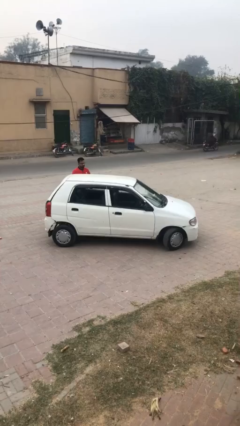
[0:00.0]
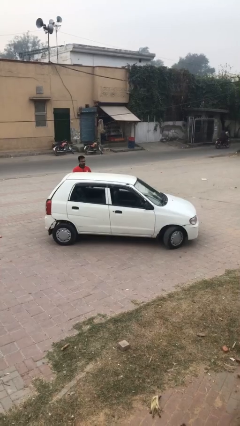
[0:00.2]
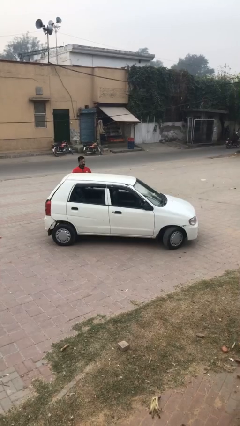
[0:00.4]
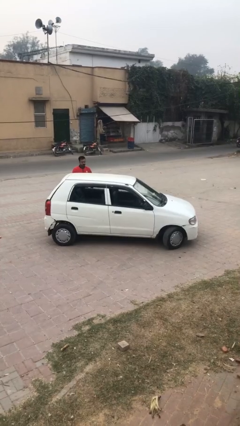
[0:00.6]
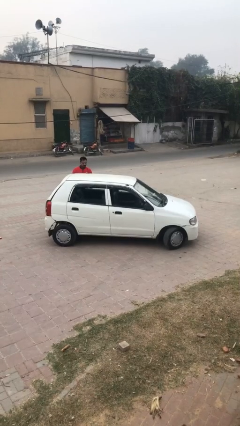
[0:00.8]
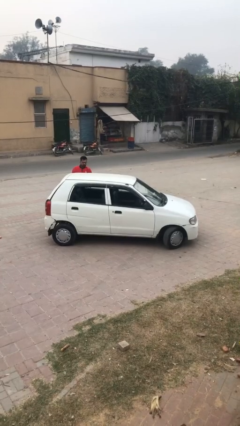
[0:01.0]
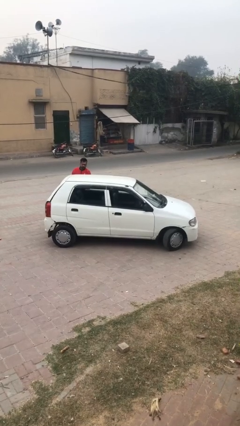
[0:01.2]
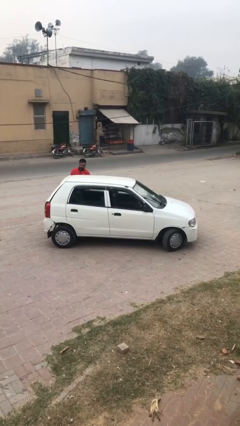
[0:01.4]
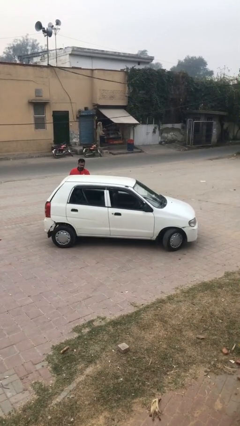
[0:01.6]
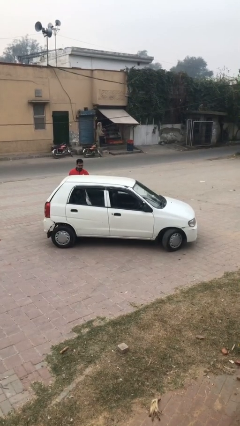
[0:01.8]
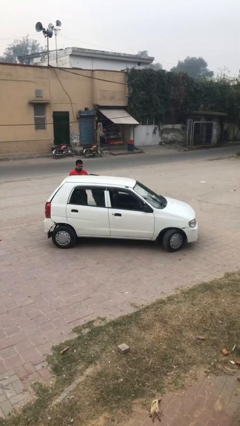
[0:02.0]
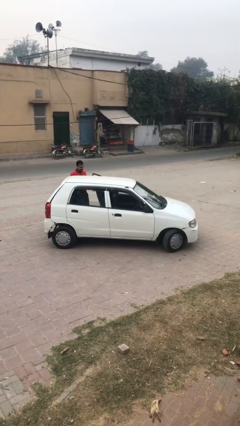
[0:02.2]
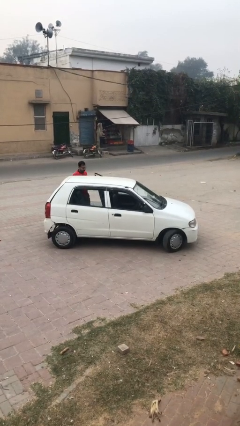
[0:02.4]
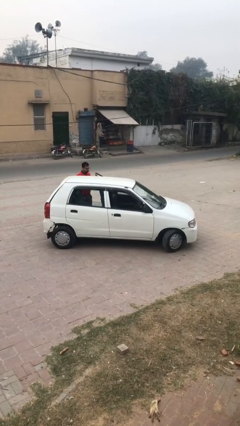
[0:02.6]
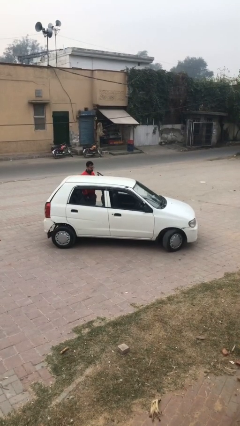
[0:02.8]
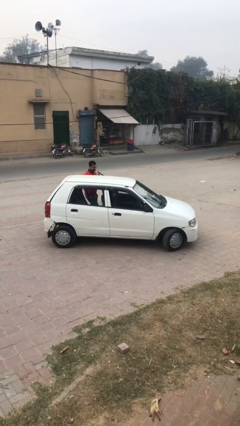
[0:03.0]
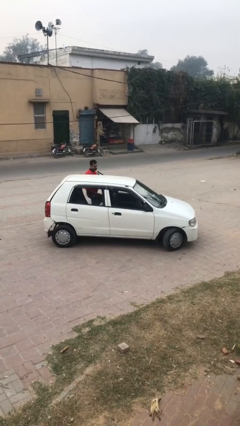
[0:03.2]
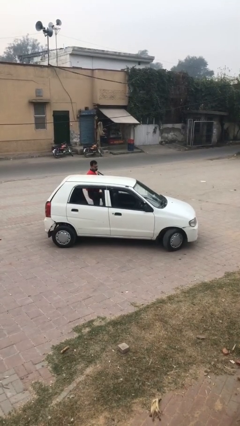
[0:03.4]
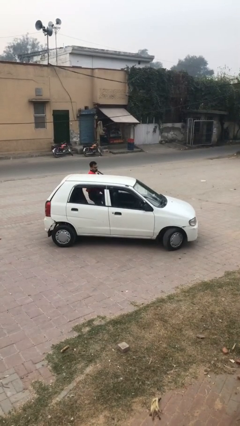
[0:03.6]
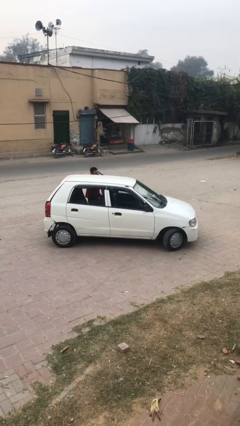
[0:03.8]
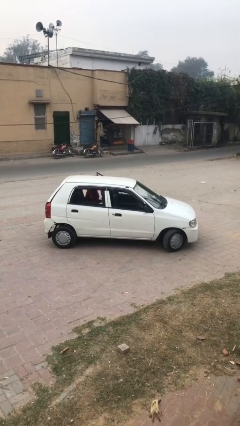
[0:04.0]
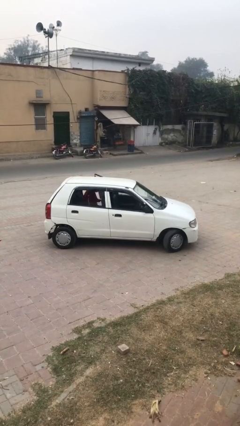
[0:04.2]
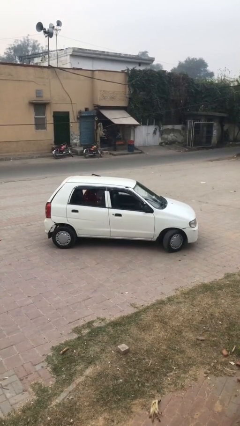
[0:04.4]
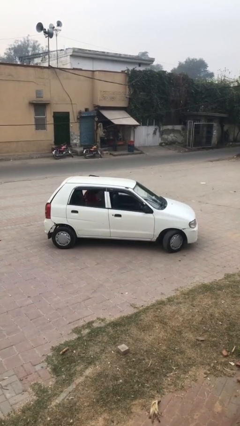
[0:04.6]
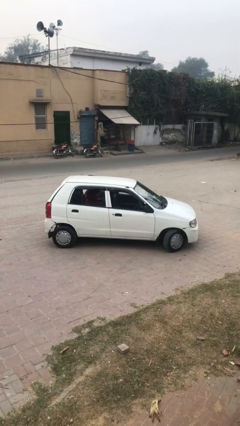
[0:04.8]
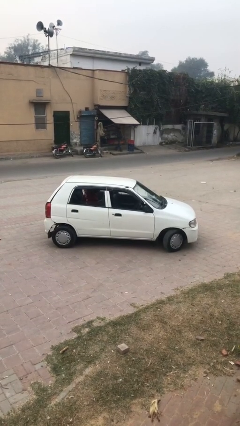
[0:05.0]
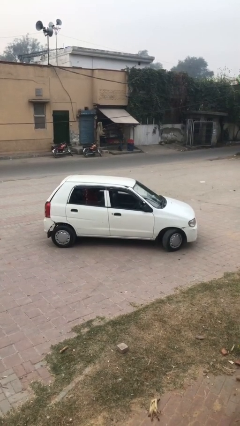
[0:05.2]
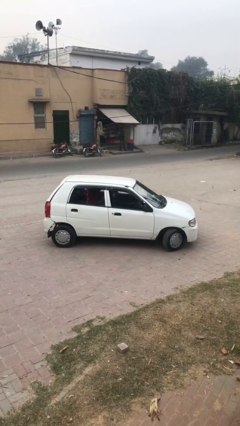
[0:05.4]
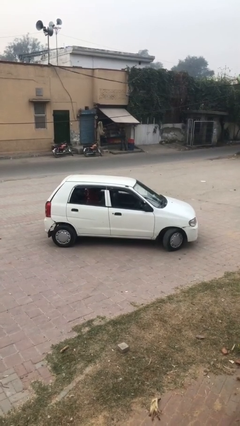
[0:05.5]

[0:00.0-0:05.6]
car picks up person

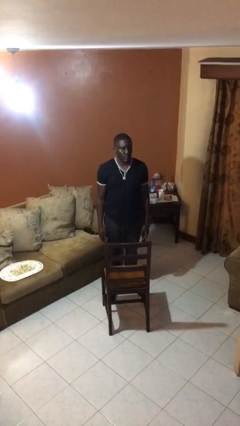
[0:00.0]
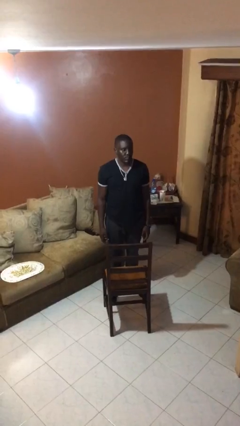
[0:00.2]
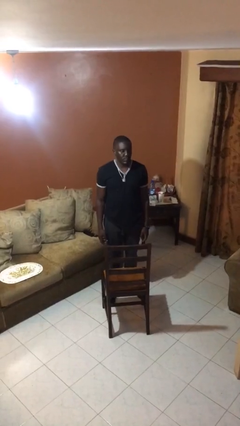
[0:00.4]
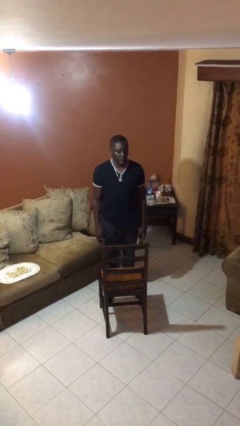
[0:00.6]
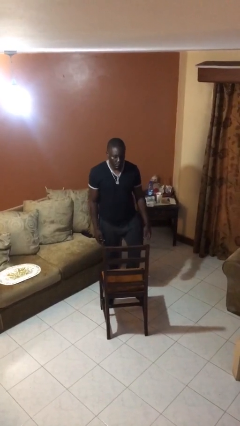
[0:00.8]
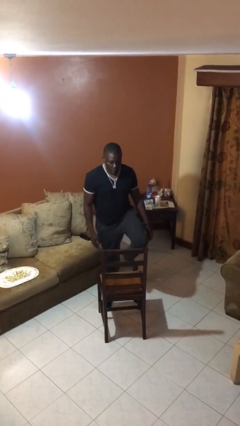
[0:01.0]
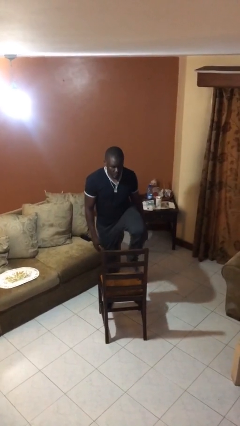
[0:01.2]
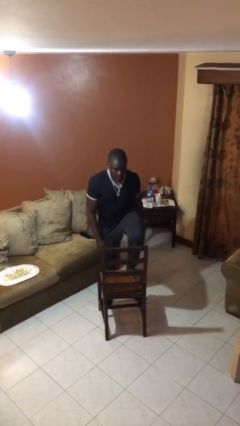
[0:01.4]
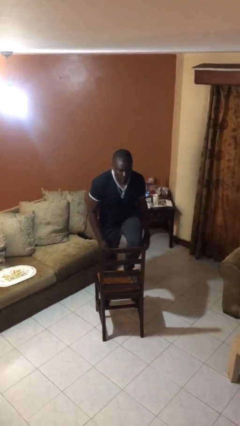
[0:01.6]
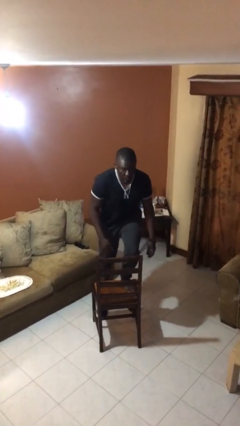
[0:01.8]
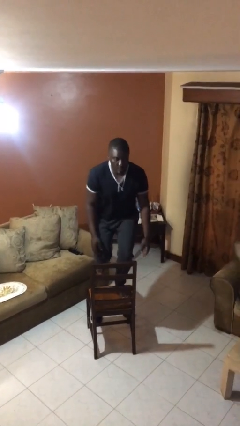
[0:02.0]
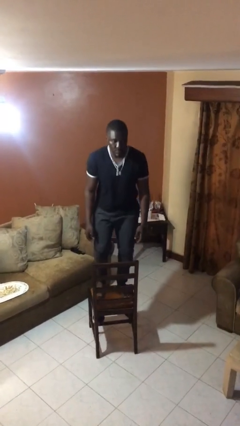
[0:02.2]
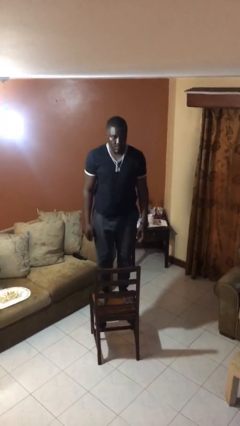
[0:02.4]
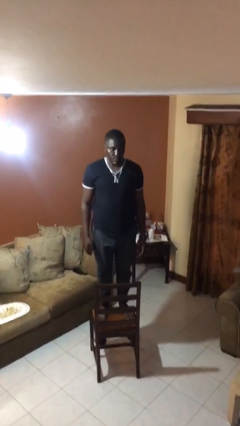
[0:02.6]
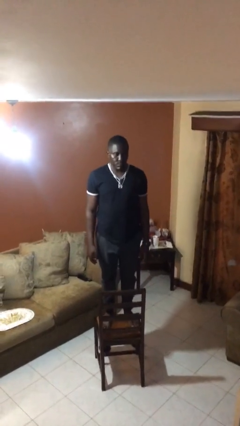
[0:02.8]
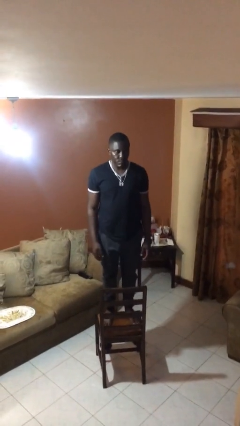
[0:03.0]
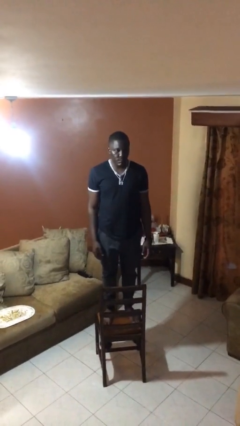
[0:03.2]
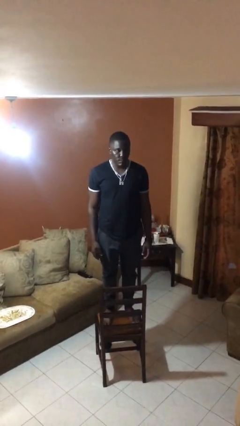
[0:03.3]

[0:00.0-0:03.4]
person climbs on chair

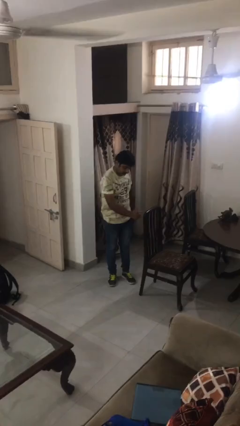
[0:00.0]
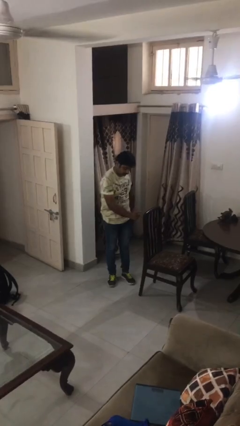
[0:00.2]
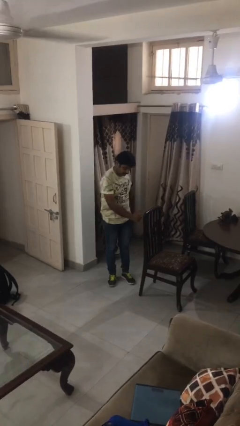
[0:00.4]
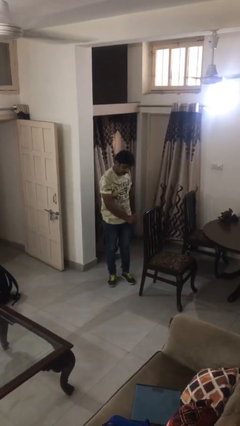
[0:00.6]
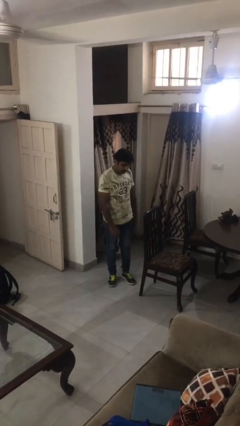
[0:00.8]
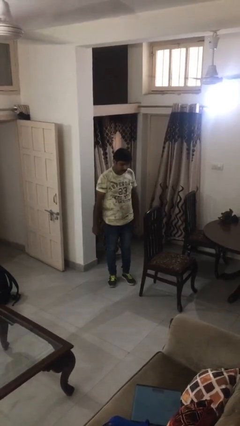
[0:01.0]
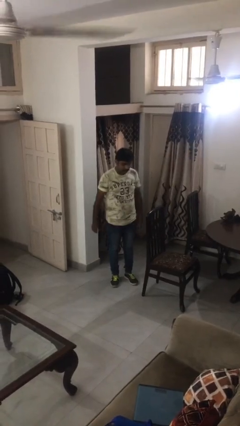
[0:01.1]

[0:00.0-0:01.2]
person taps object with finger

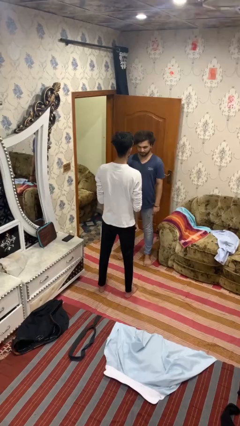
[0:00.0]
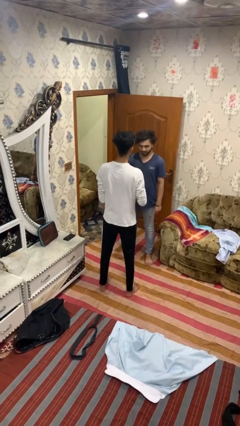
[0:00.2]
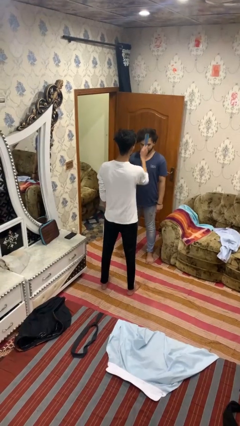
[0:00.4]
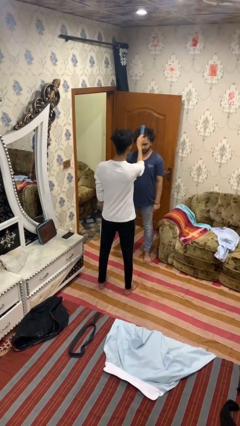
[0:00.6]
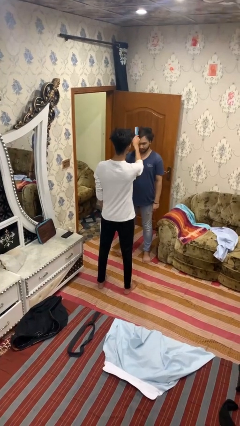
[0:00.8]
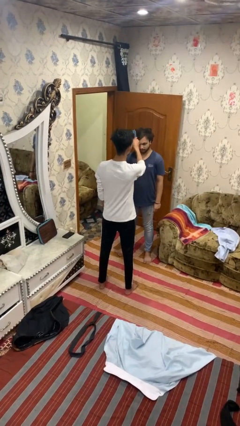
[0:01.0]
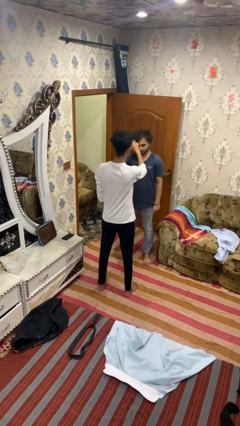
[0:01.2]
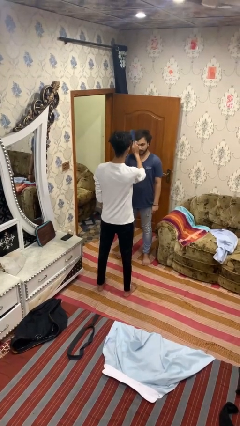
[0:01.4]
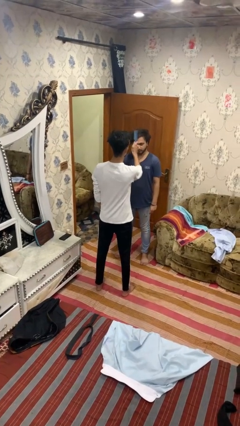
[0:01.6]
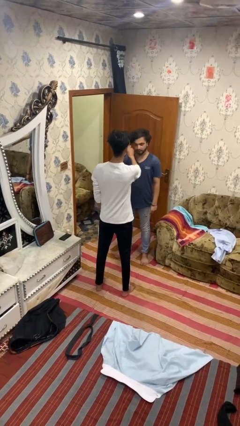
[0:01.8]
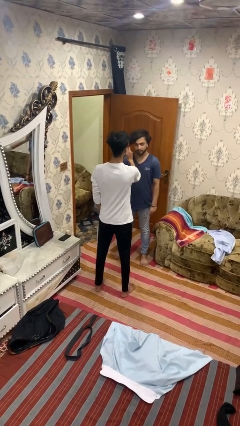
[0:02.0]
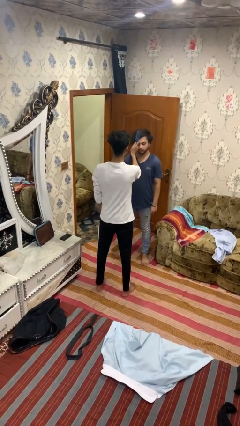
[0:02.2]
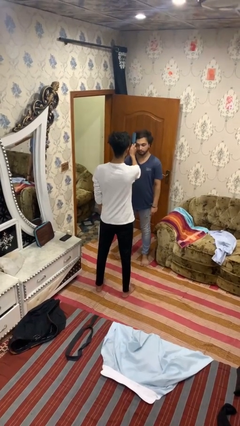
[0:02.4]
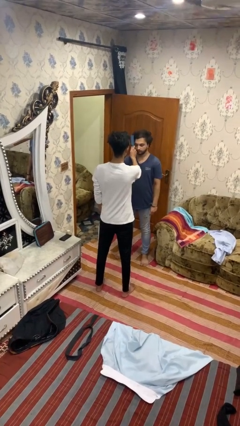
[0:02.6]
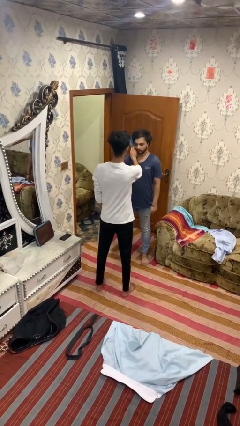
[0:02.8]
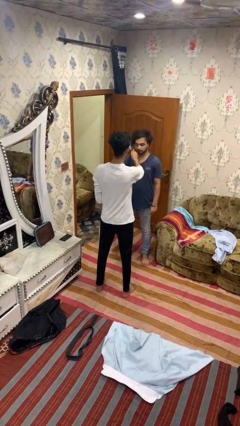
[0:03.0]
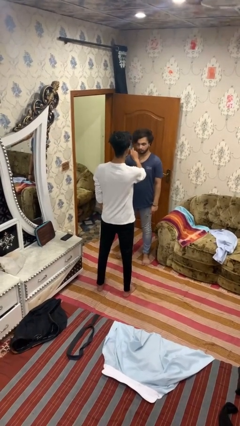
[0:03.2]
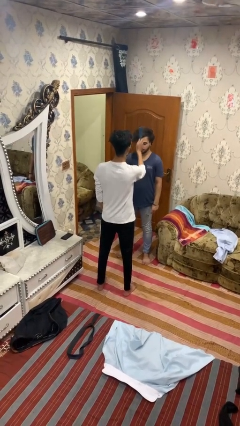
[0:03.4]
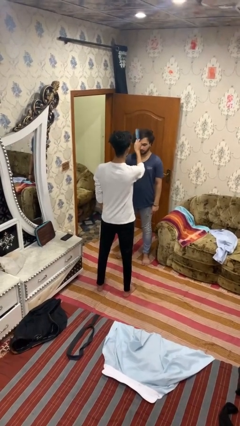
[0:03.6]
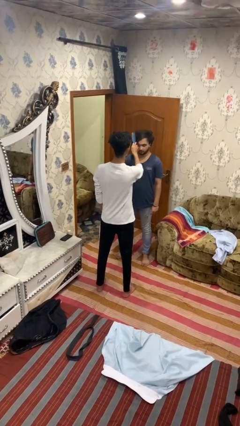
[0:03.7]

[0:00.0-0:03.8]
person brushes hair of person

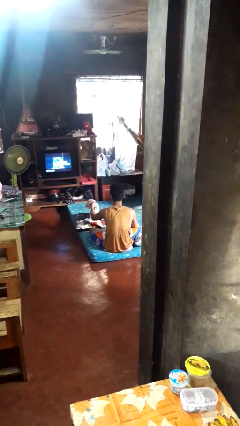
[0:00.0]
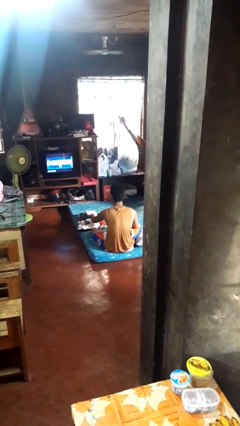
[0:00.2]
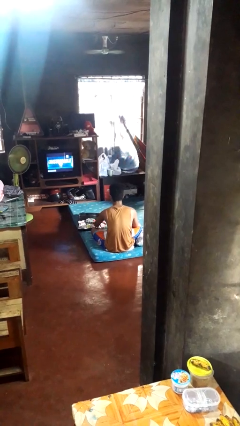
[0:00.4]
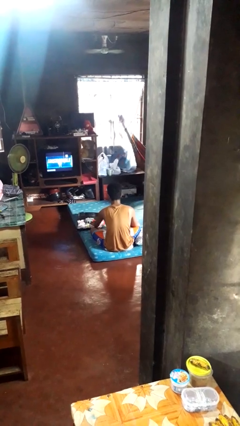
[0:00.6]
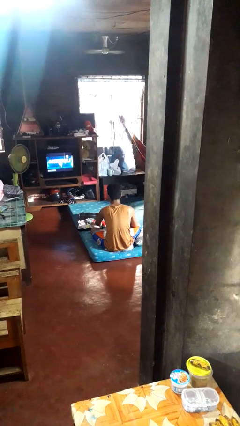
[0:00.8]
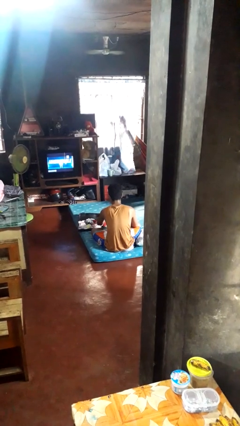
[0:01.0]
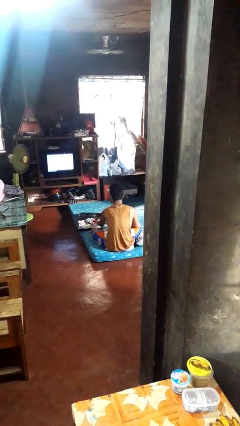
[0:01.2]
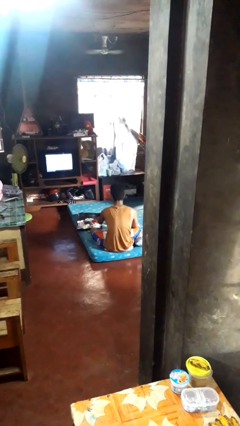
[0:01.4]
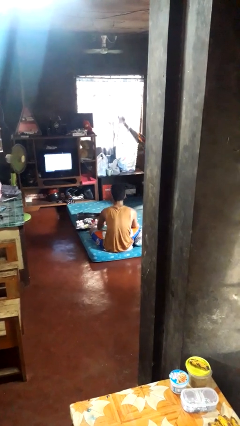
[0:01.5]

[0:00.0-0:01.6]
person loads clothes into suitcase

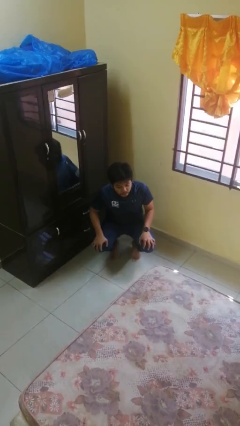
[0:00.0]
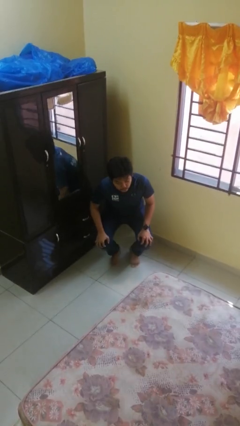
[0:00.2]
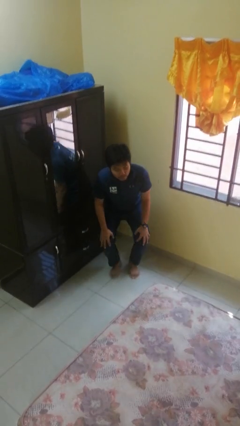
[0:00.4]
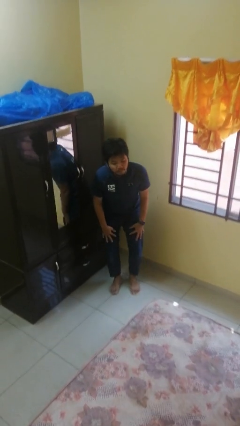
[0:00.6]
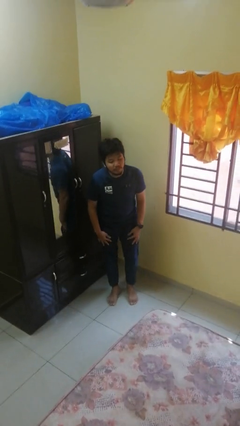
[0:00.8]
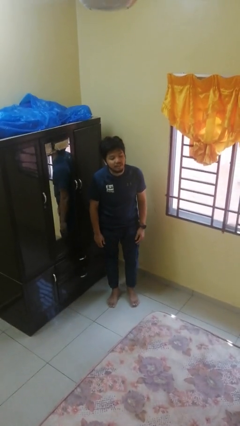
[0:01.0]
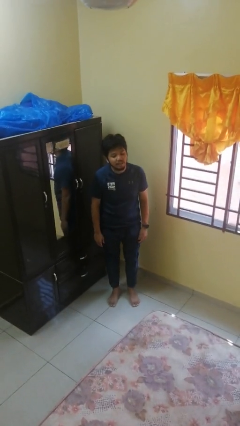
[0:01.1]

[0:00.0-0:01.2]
person stands up

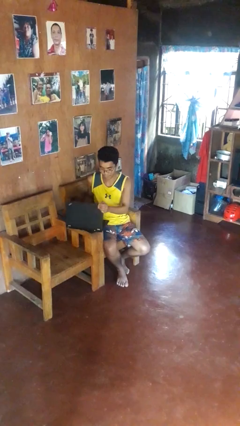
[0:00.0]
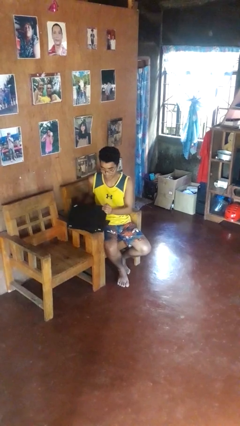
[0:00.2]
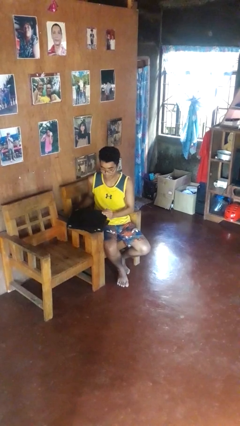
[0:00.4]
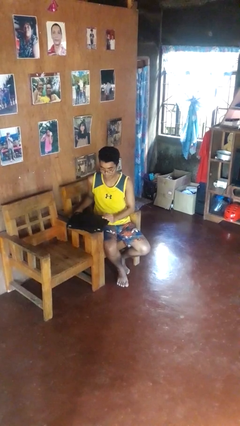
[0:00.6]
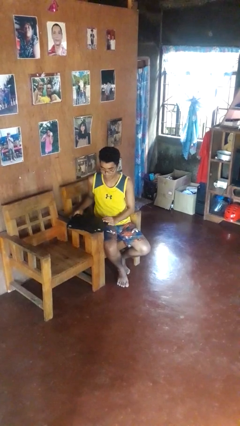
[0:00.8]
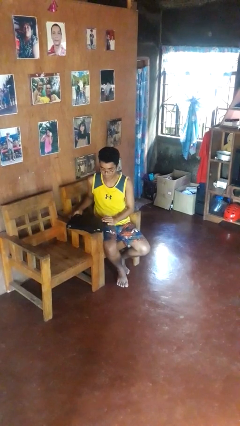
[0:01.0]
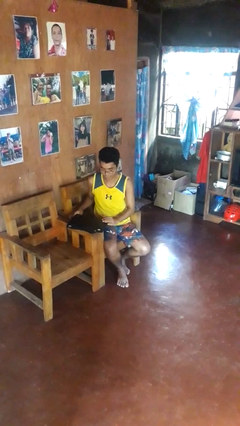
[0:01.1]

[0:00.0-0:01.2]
person closes laptop
